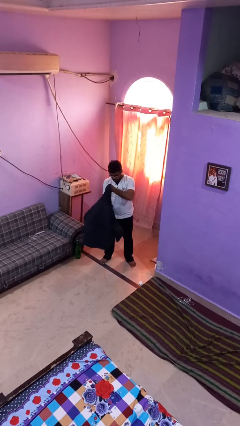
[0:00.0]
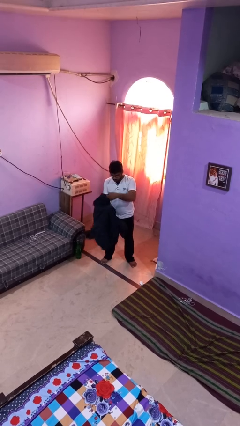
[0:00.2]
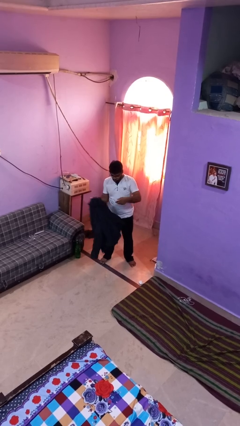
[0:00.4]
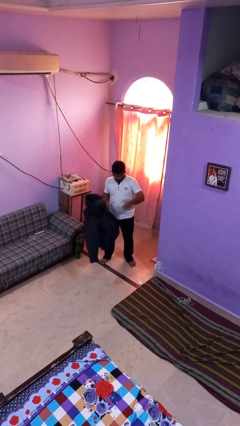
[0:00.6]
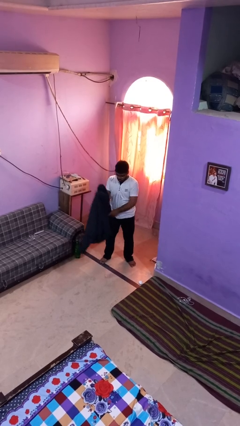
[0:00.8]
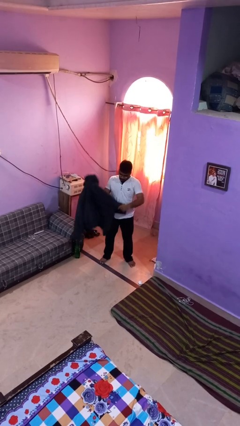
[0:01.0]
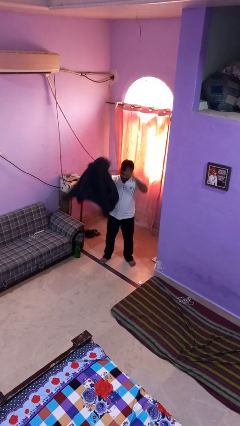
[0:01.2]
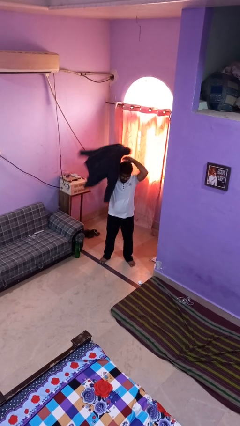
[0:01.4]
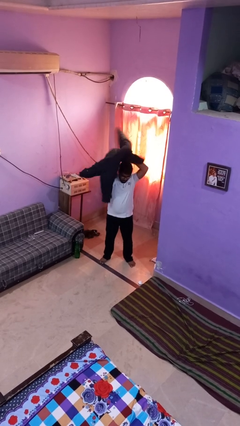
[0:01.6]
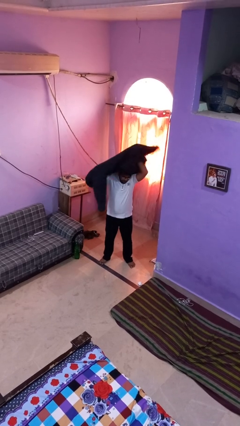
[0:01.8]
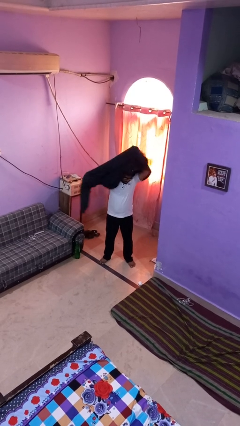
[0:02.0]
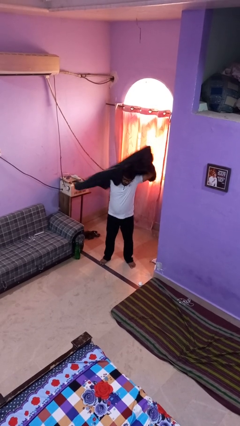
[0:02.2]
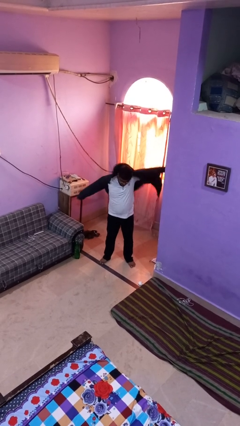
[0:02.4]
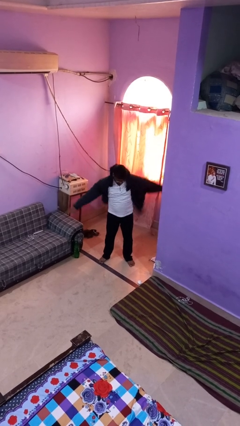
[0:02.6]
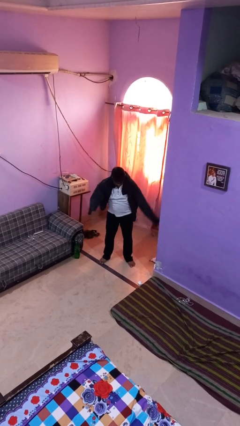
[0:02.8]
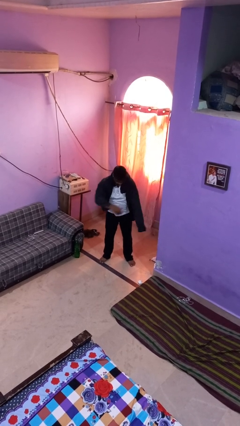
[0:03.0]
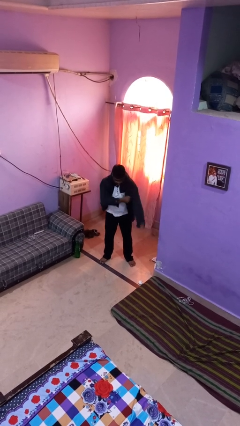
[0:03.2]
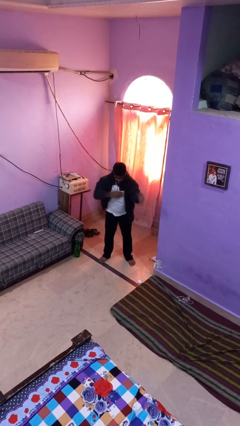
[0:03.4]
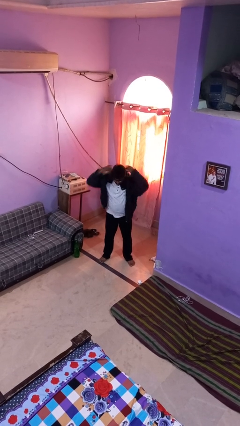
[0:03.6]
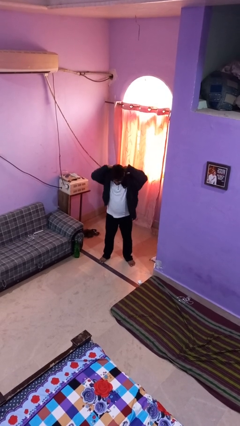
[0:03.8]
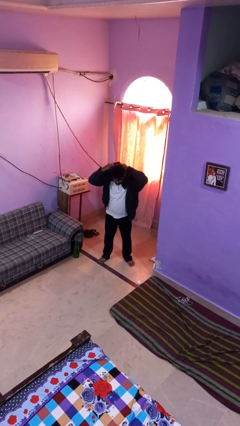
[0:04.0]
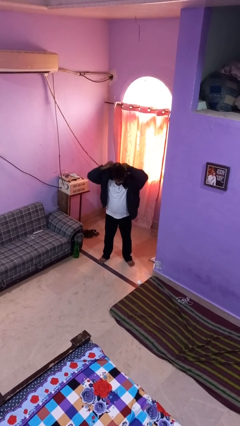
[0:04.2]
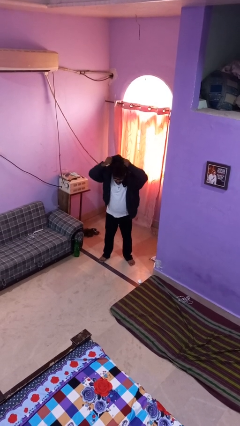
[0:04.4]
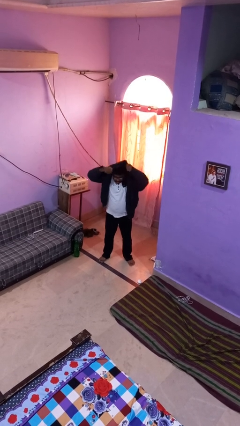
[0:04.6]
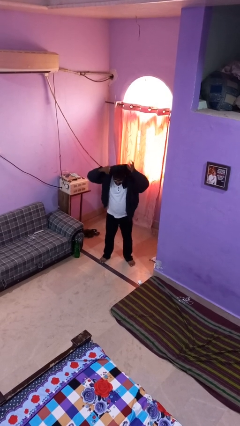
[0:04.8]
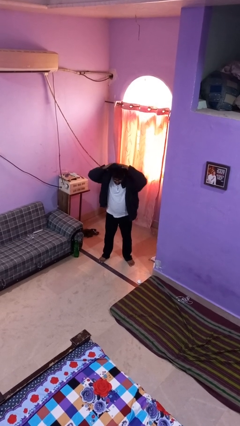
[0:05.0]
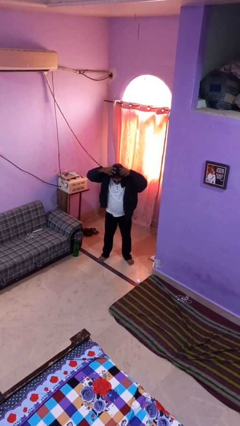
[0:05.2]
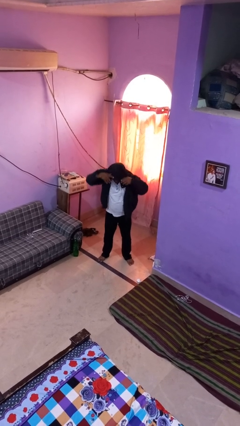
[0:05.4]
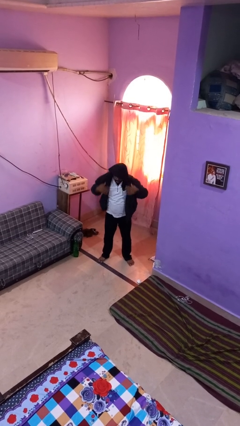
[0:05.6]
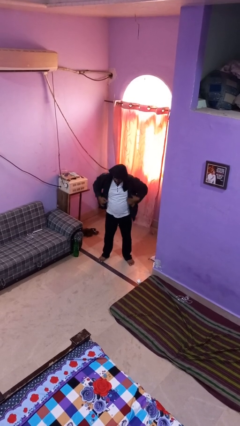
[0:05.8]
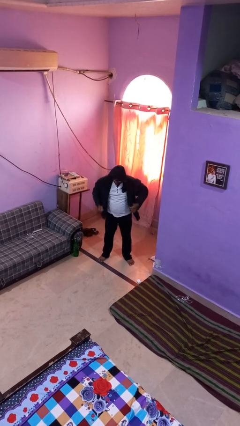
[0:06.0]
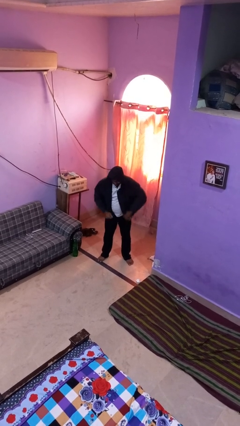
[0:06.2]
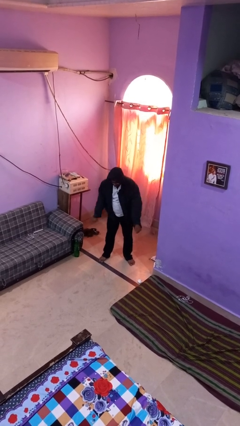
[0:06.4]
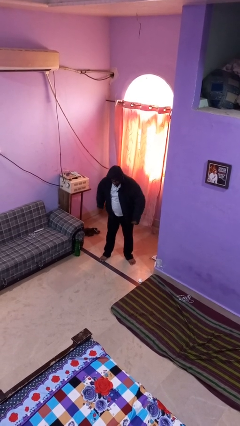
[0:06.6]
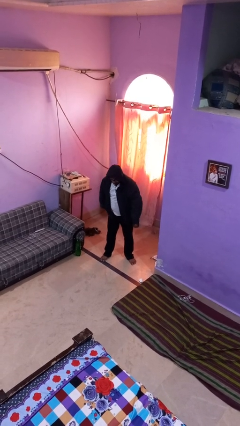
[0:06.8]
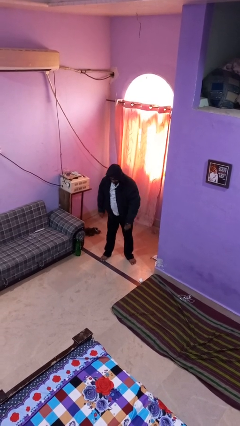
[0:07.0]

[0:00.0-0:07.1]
person puts on hoodie

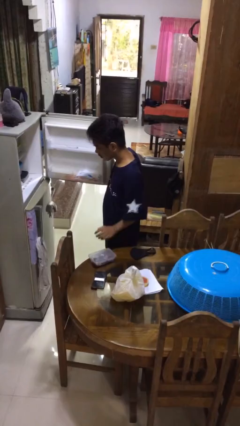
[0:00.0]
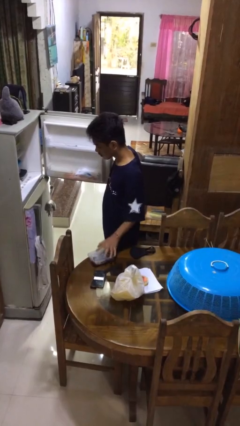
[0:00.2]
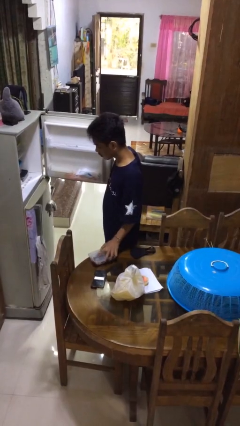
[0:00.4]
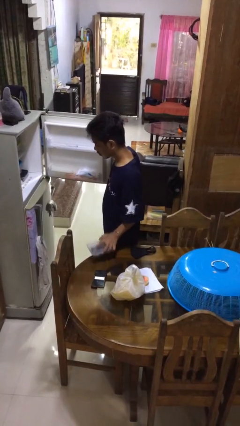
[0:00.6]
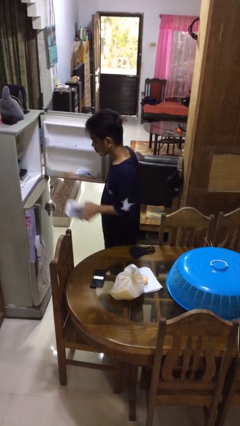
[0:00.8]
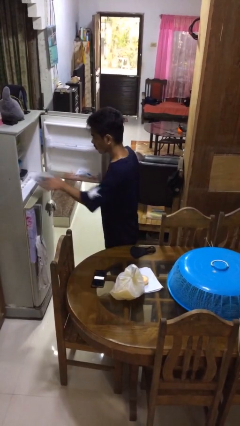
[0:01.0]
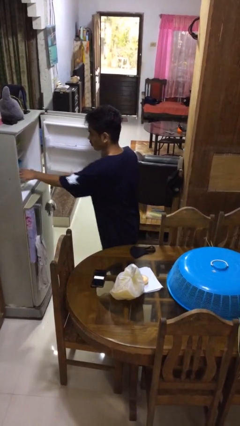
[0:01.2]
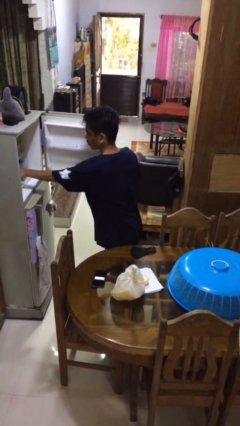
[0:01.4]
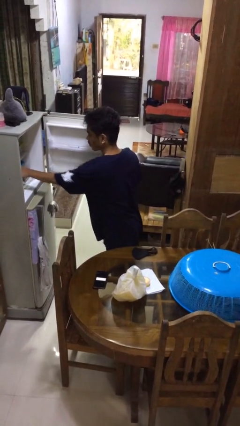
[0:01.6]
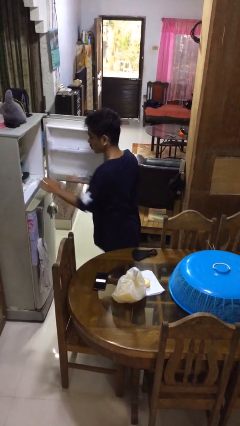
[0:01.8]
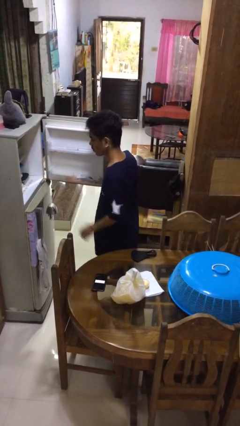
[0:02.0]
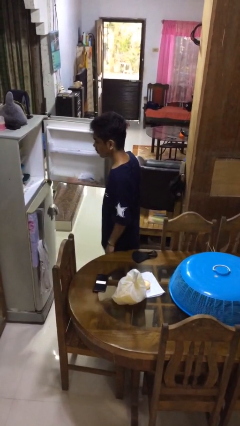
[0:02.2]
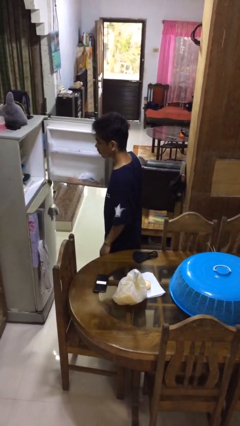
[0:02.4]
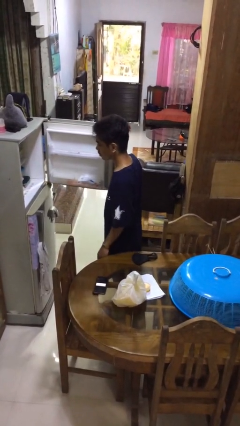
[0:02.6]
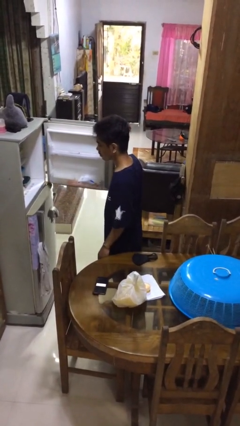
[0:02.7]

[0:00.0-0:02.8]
person puts object into refrigerator

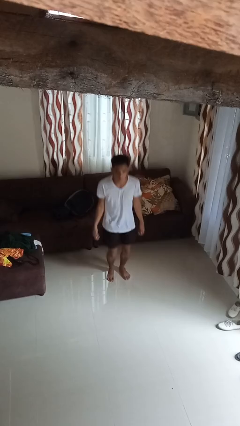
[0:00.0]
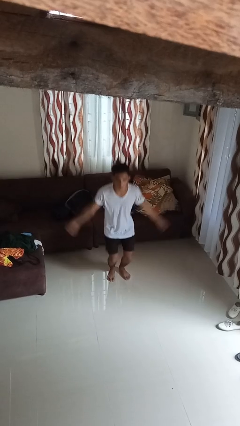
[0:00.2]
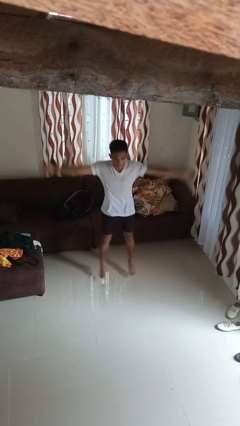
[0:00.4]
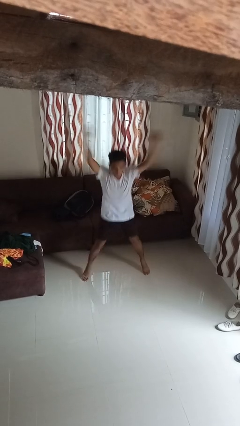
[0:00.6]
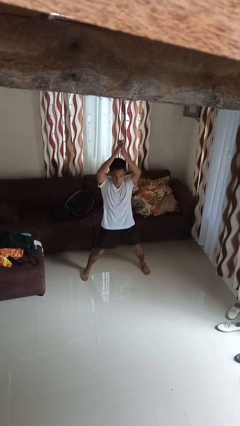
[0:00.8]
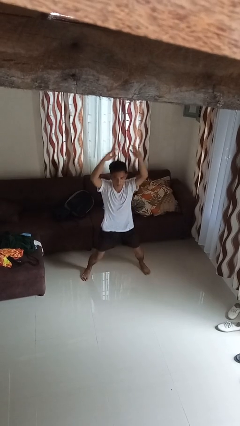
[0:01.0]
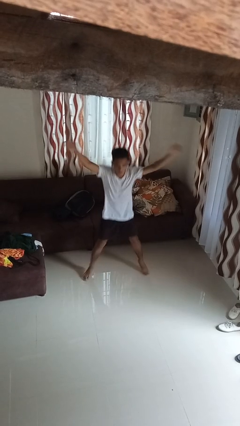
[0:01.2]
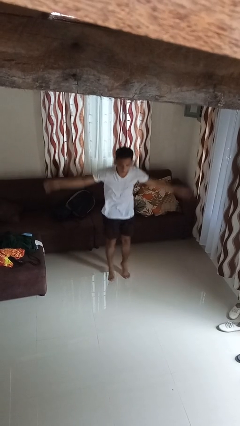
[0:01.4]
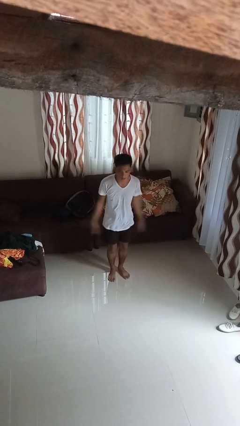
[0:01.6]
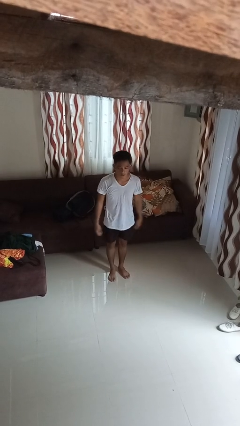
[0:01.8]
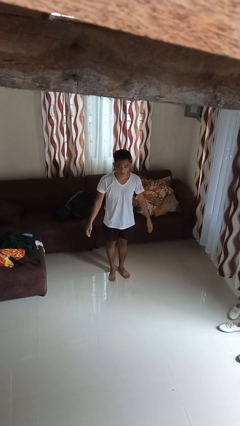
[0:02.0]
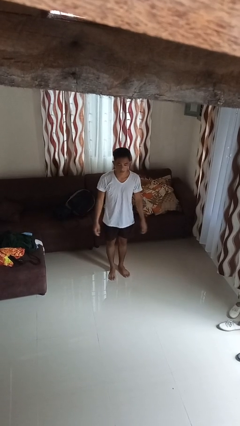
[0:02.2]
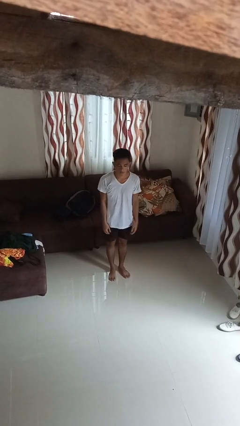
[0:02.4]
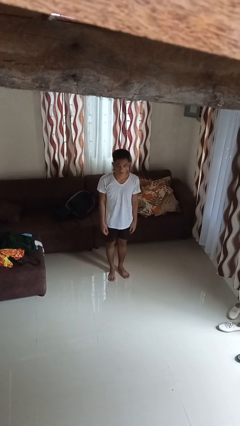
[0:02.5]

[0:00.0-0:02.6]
person exercises with jumping jacks

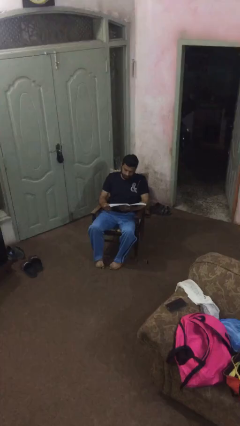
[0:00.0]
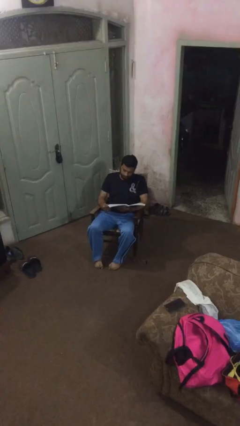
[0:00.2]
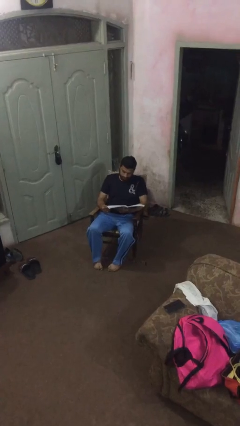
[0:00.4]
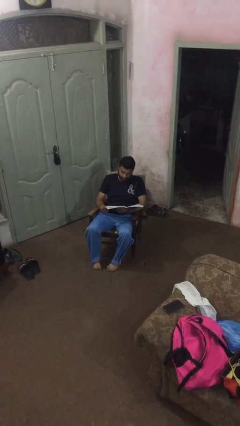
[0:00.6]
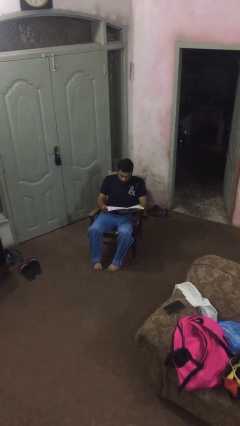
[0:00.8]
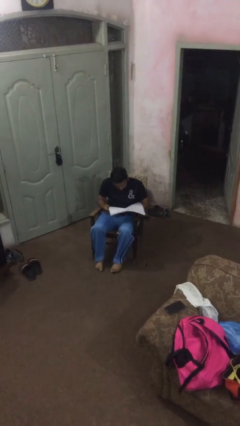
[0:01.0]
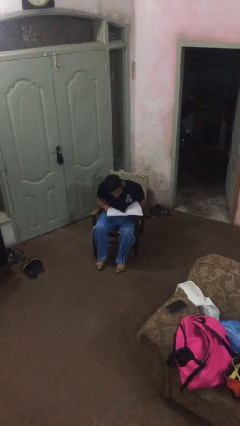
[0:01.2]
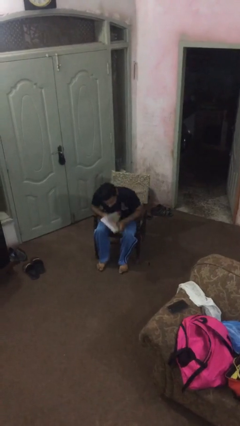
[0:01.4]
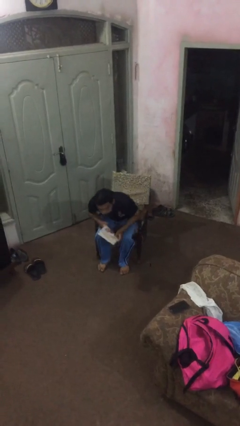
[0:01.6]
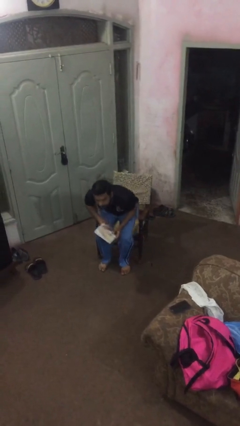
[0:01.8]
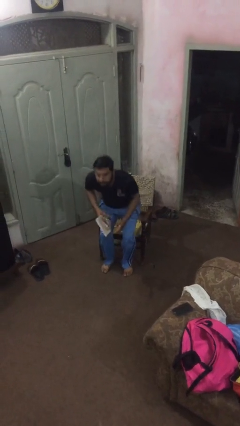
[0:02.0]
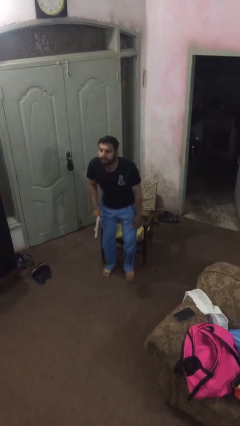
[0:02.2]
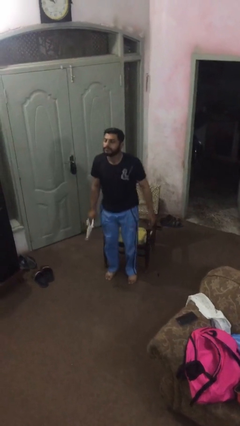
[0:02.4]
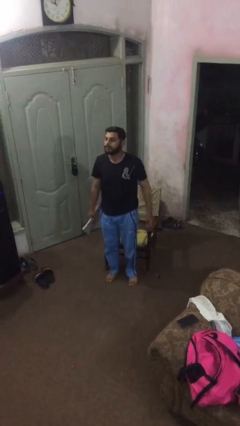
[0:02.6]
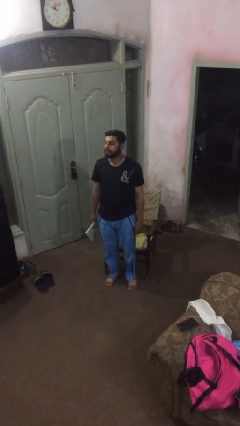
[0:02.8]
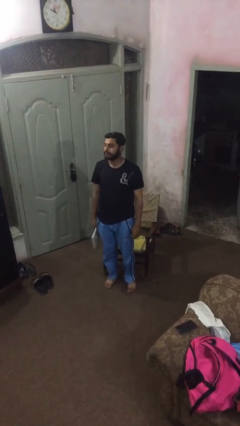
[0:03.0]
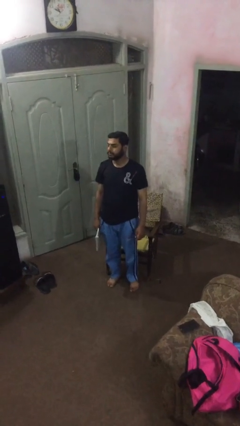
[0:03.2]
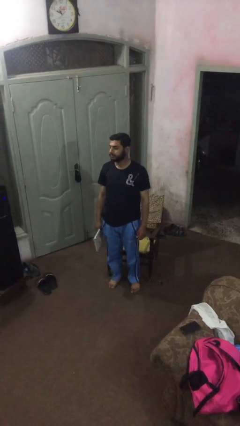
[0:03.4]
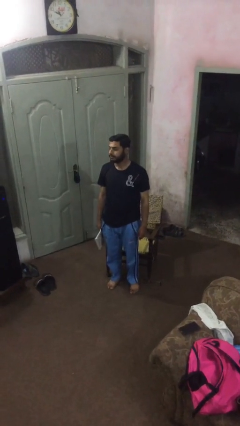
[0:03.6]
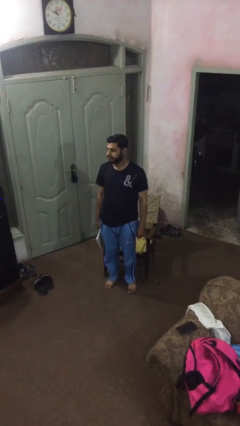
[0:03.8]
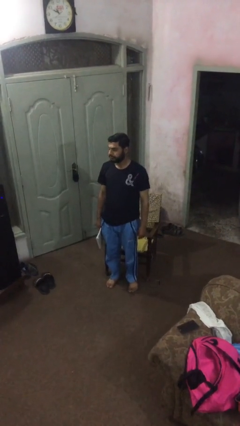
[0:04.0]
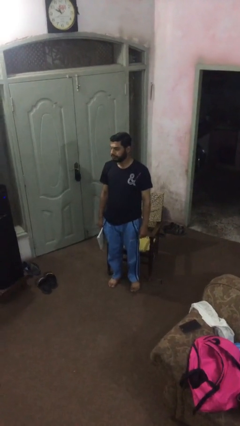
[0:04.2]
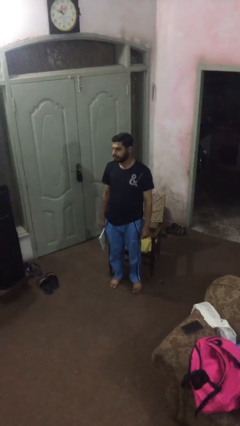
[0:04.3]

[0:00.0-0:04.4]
person stands up

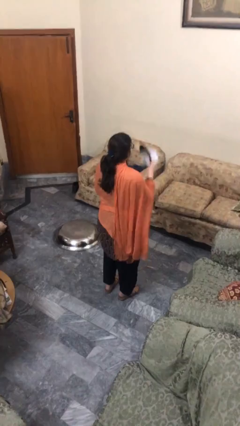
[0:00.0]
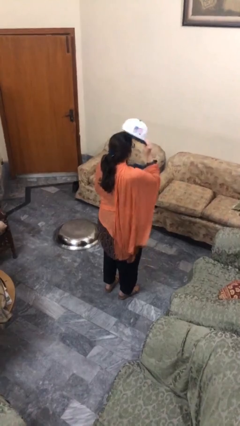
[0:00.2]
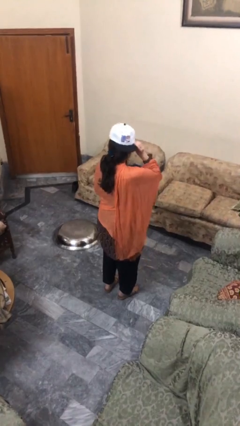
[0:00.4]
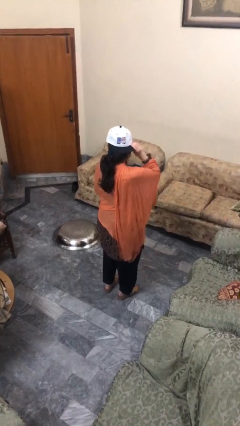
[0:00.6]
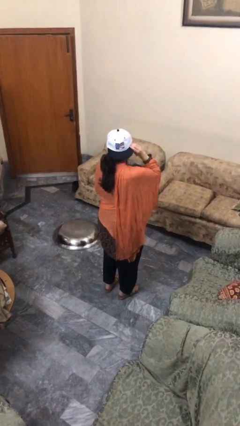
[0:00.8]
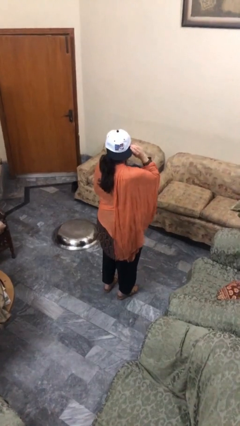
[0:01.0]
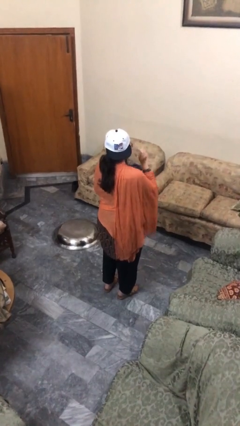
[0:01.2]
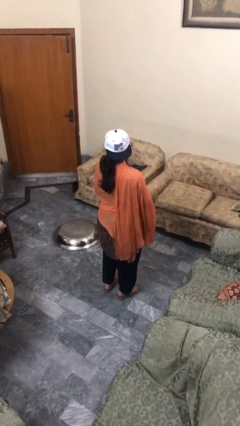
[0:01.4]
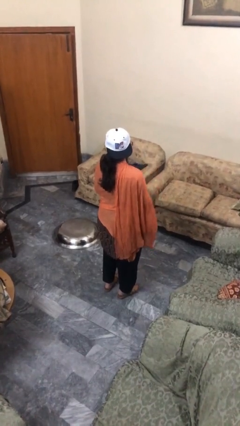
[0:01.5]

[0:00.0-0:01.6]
person puts on hat
